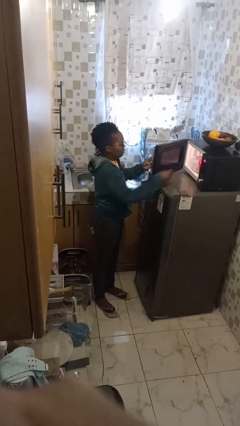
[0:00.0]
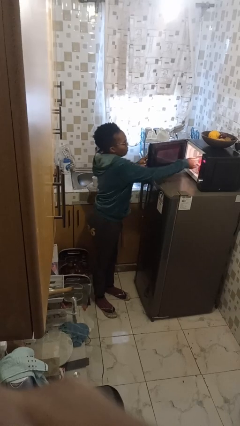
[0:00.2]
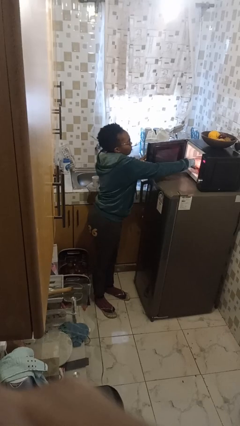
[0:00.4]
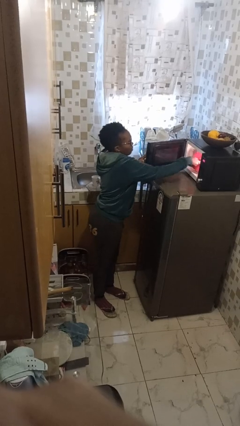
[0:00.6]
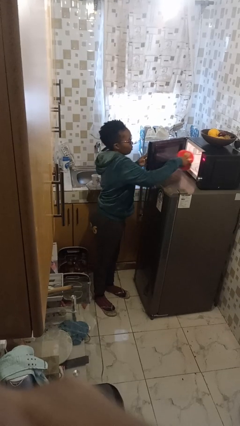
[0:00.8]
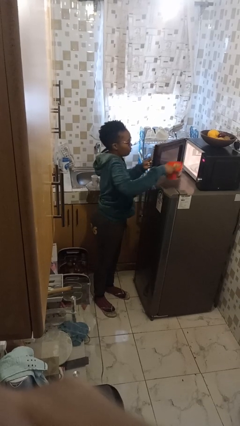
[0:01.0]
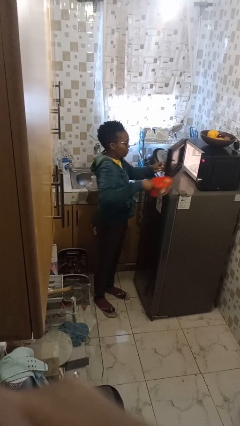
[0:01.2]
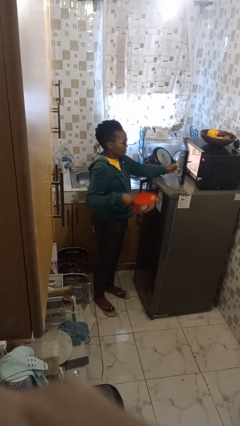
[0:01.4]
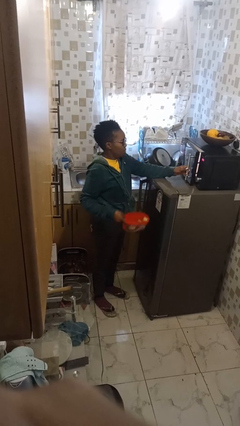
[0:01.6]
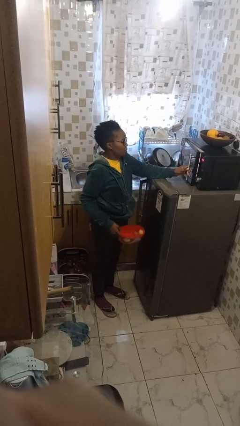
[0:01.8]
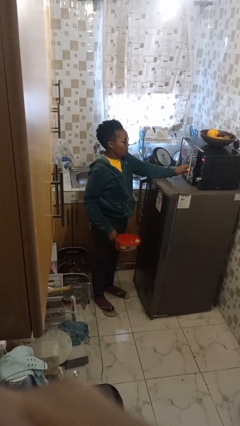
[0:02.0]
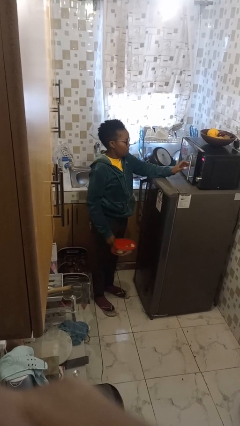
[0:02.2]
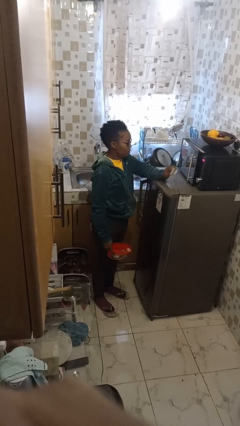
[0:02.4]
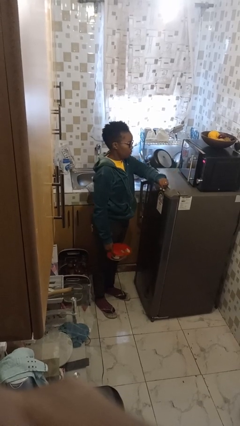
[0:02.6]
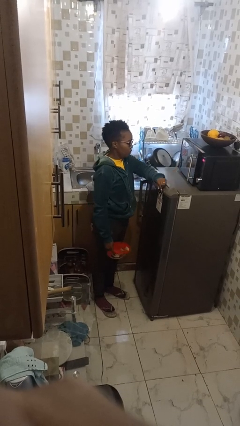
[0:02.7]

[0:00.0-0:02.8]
person takes object from microwave

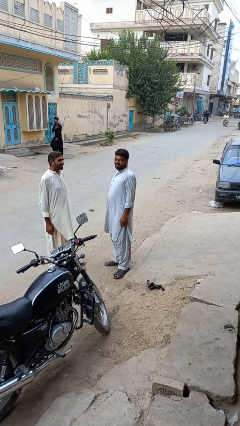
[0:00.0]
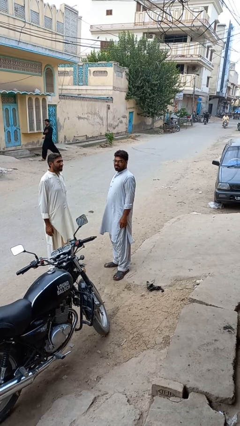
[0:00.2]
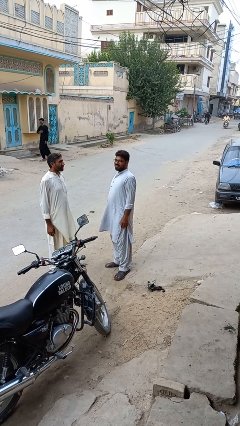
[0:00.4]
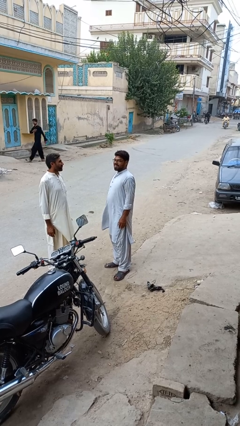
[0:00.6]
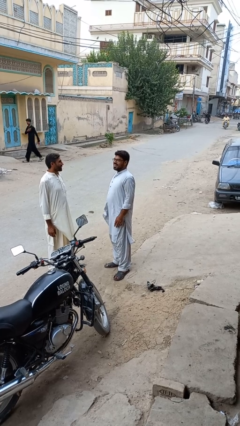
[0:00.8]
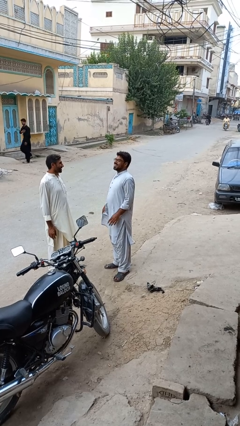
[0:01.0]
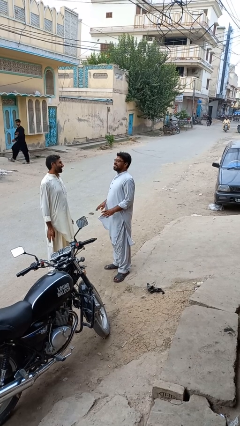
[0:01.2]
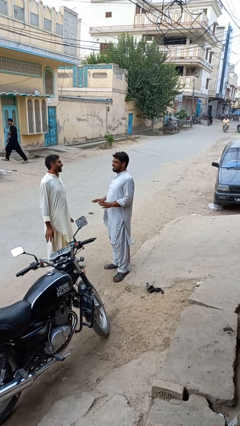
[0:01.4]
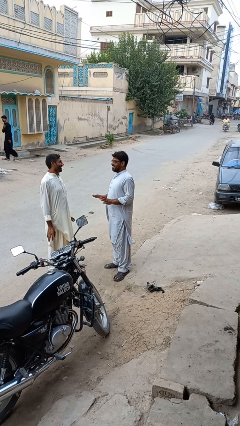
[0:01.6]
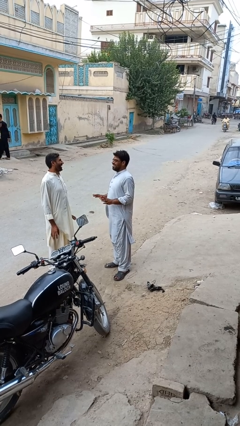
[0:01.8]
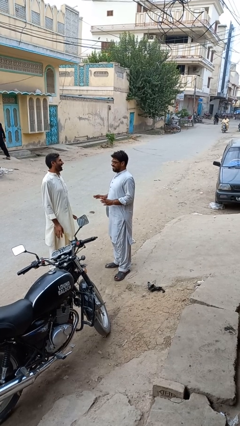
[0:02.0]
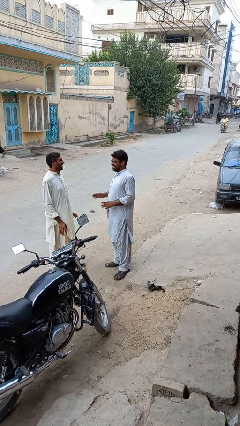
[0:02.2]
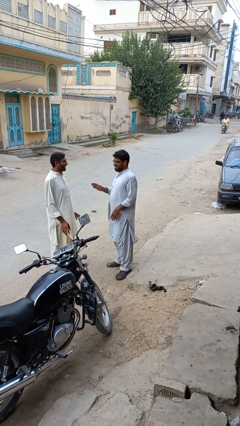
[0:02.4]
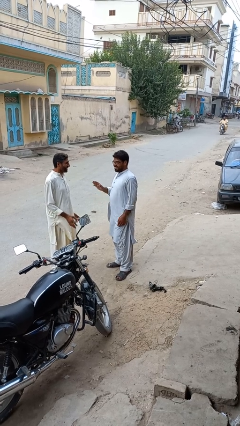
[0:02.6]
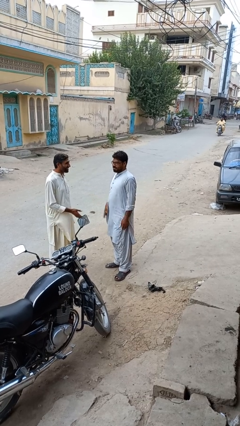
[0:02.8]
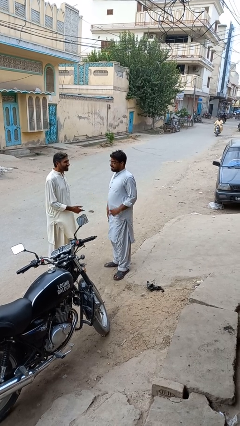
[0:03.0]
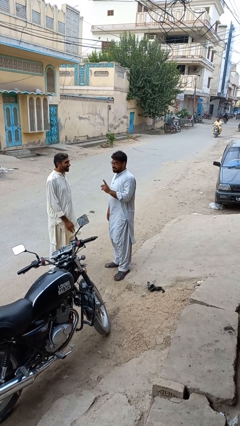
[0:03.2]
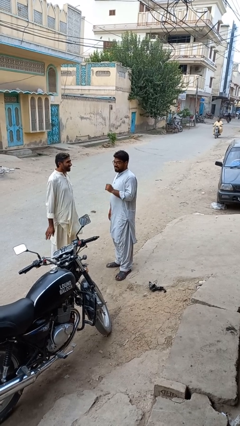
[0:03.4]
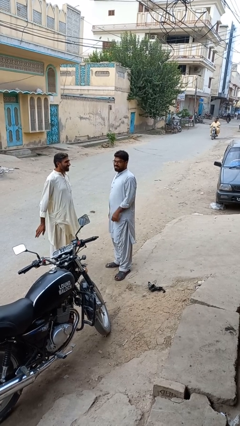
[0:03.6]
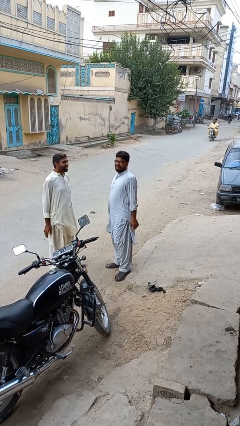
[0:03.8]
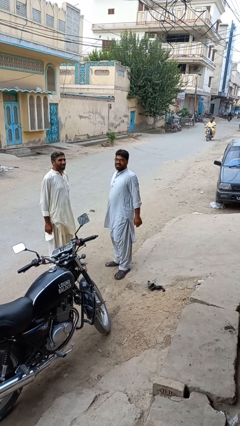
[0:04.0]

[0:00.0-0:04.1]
person laughs with person

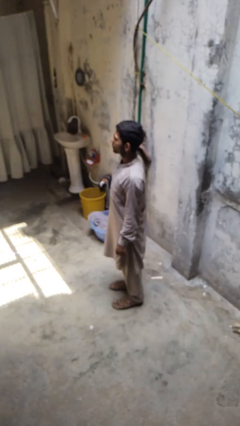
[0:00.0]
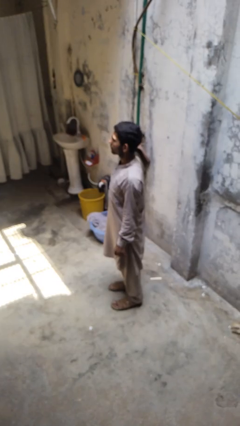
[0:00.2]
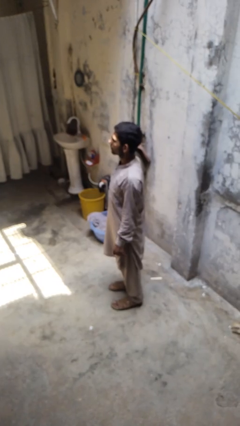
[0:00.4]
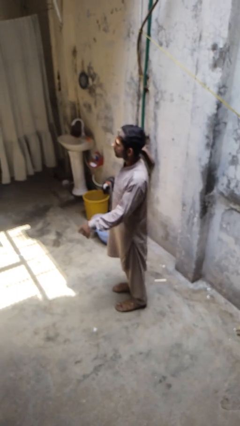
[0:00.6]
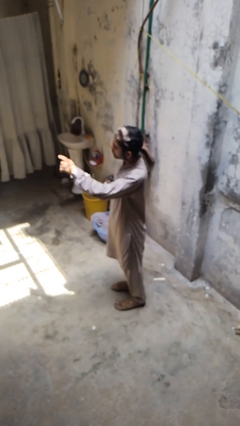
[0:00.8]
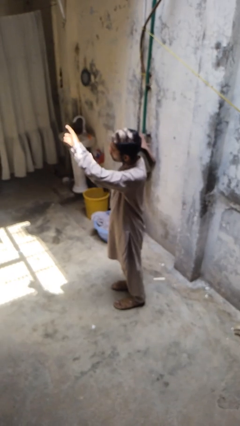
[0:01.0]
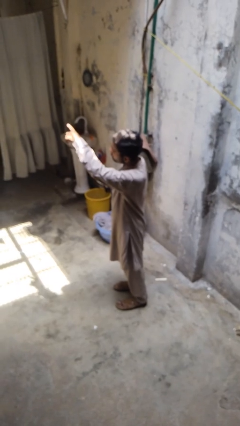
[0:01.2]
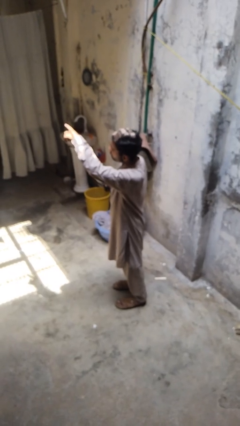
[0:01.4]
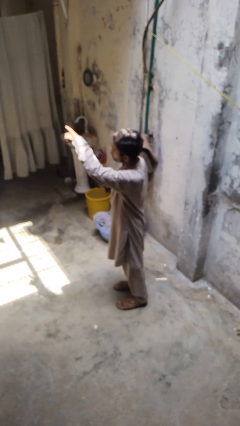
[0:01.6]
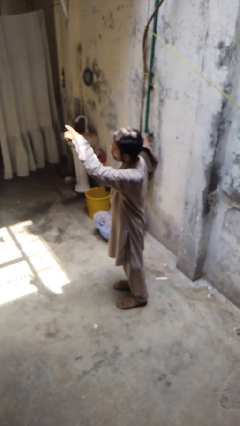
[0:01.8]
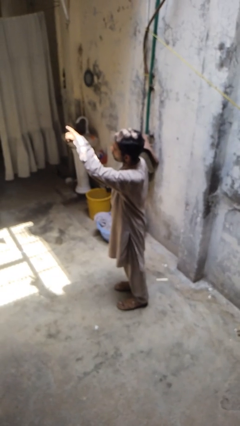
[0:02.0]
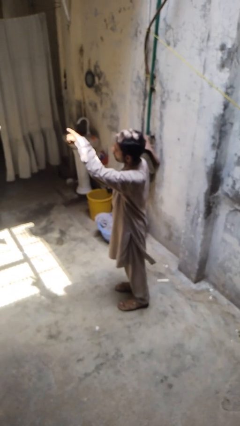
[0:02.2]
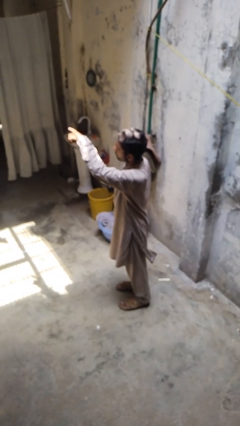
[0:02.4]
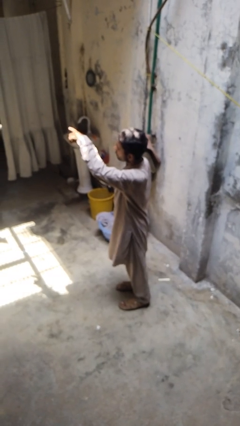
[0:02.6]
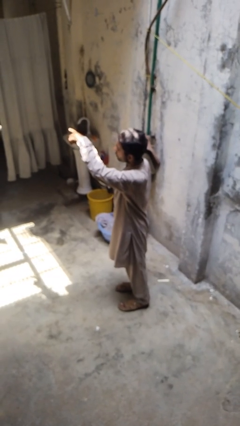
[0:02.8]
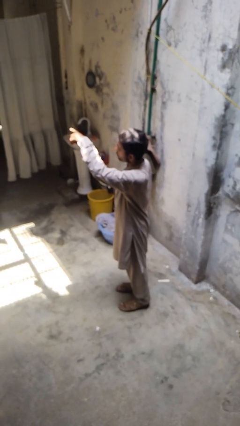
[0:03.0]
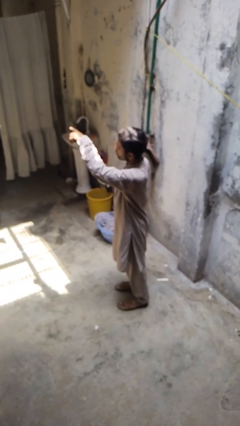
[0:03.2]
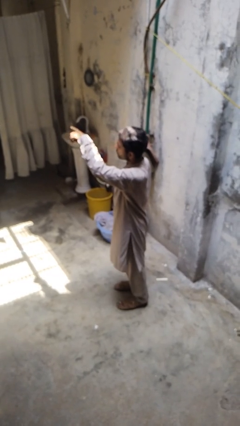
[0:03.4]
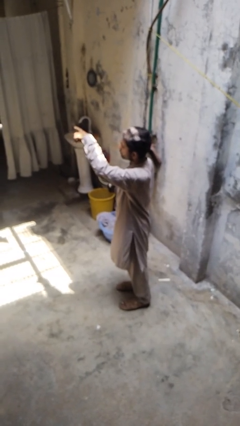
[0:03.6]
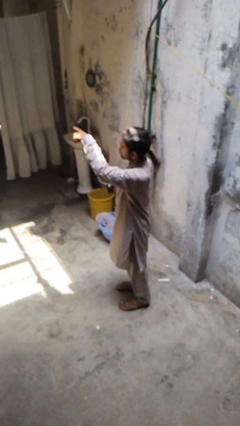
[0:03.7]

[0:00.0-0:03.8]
person points at person

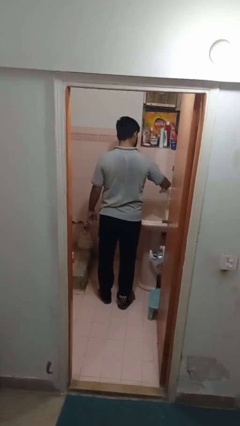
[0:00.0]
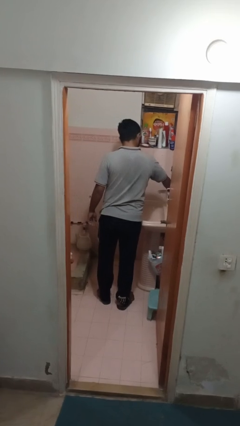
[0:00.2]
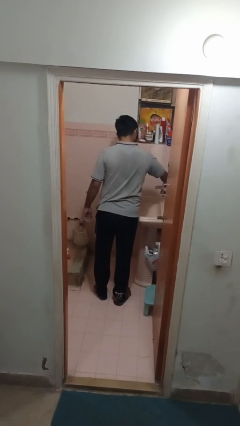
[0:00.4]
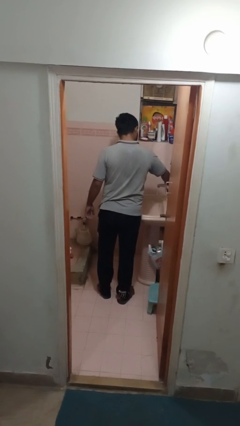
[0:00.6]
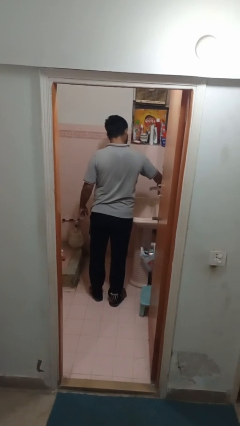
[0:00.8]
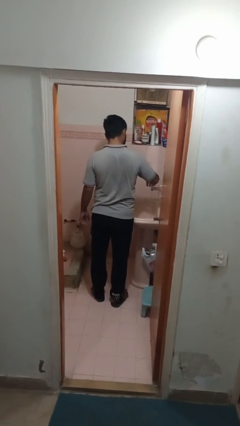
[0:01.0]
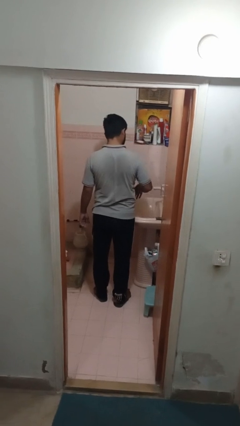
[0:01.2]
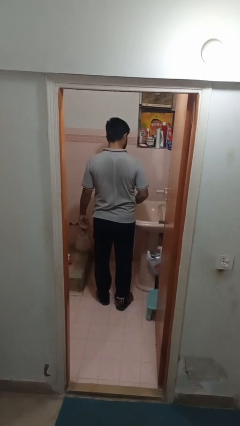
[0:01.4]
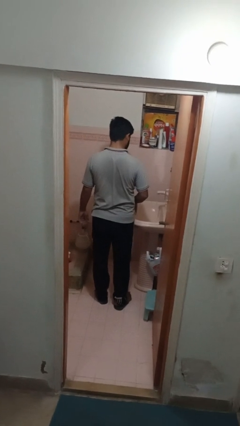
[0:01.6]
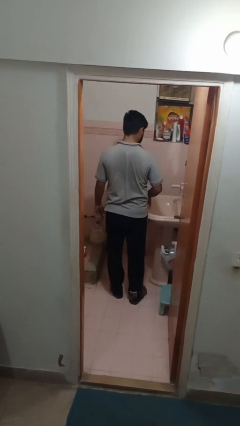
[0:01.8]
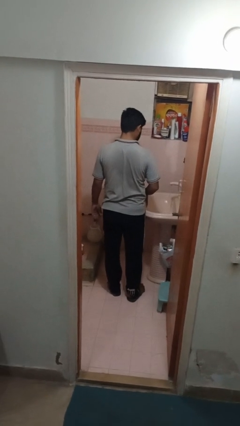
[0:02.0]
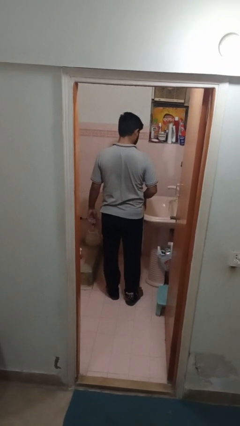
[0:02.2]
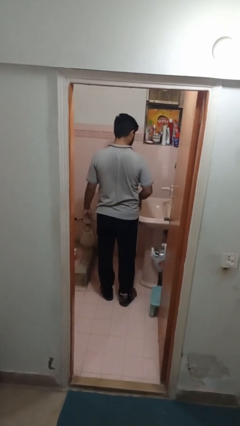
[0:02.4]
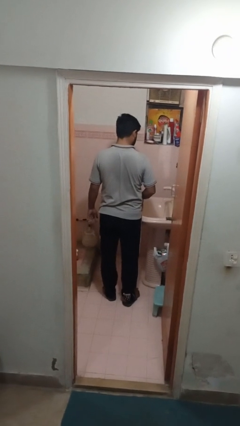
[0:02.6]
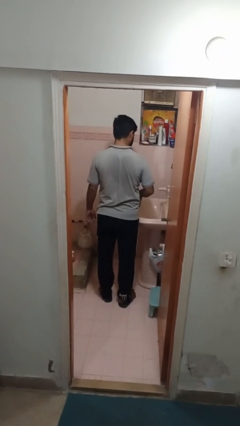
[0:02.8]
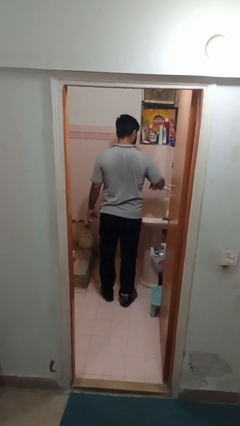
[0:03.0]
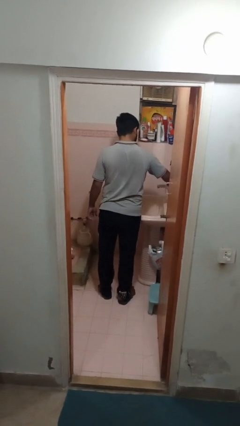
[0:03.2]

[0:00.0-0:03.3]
person turns on faucet

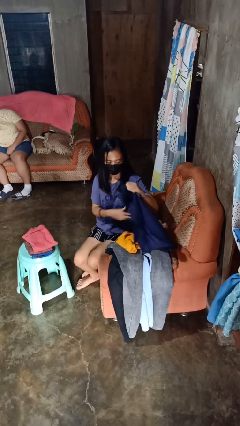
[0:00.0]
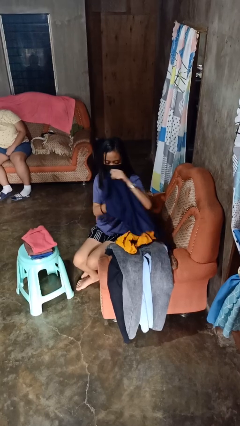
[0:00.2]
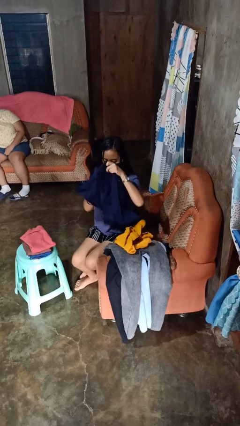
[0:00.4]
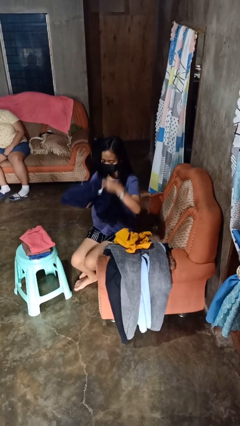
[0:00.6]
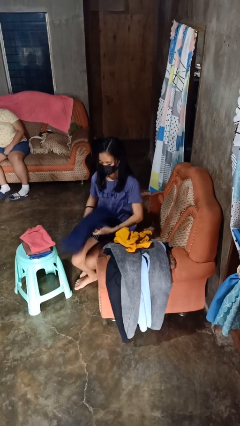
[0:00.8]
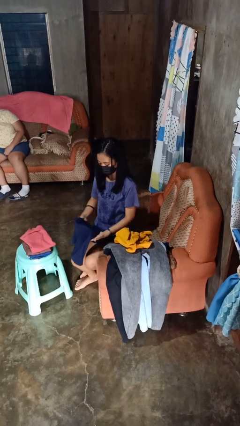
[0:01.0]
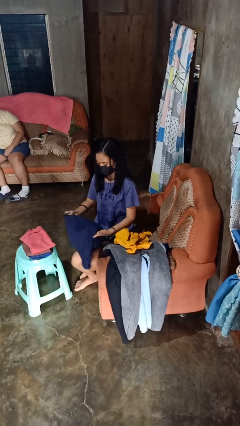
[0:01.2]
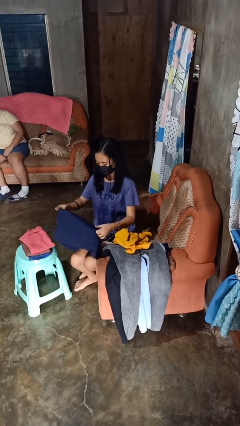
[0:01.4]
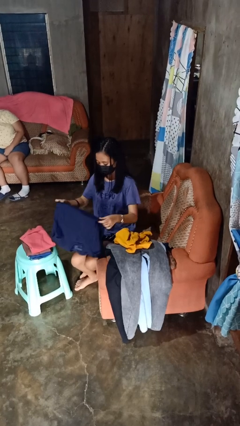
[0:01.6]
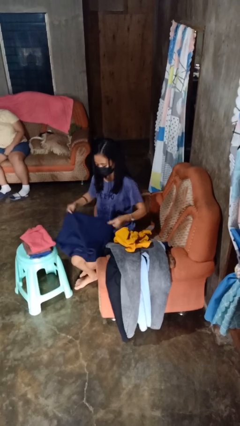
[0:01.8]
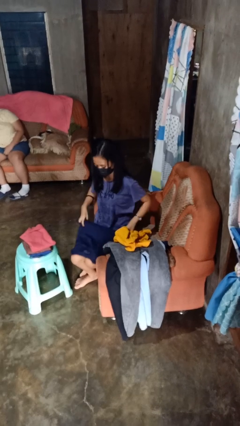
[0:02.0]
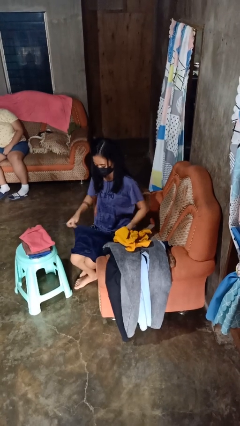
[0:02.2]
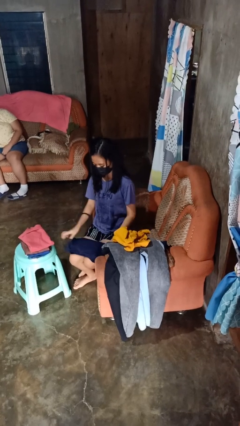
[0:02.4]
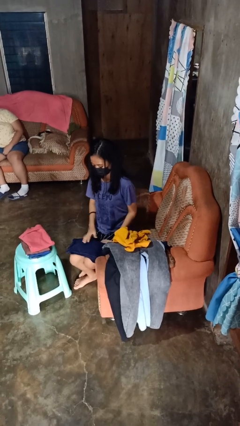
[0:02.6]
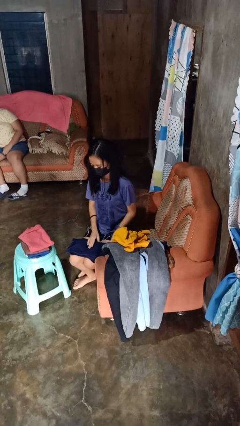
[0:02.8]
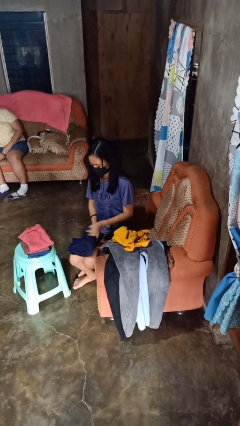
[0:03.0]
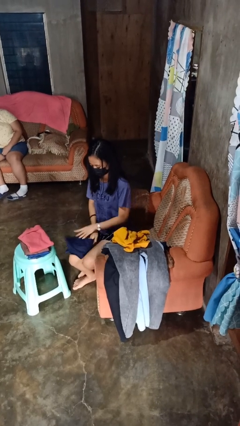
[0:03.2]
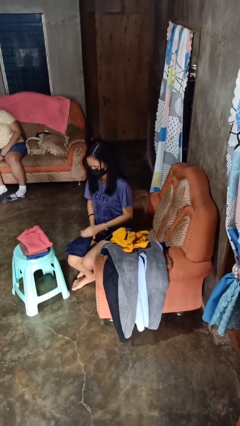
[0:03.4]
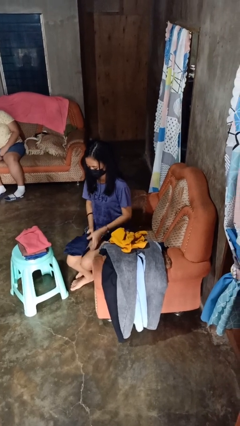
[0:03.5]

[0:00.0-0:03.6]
person folds shirt
